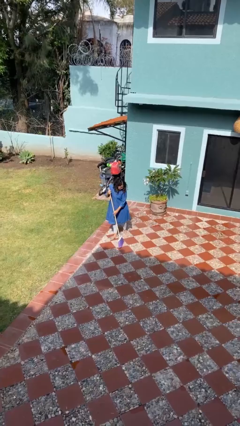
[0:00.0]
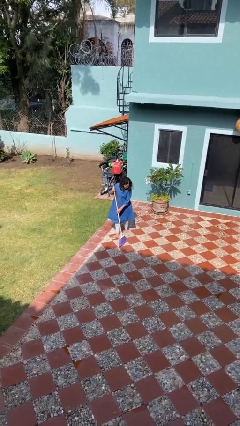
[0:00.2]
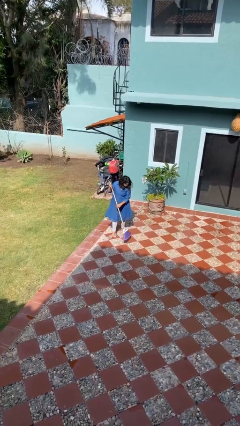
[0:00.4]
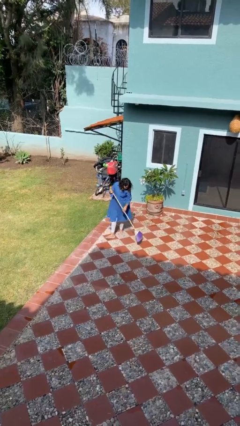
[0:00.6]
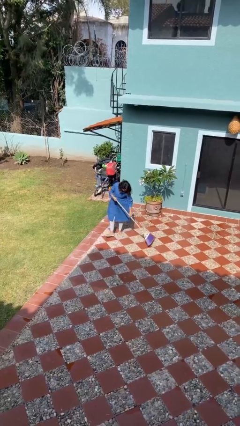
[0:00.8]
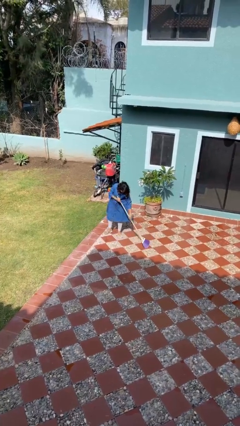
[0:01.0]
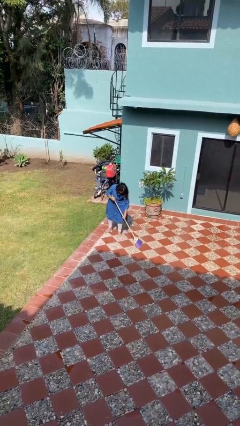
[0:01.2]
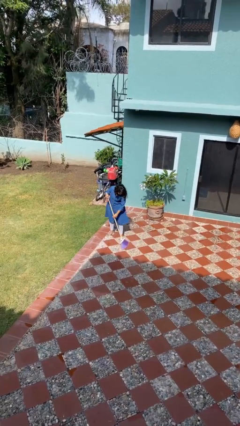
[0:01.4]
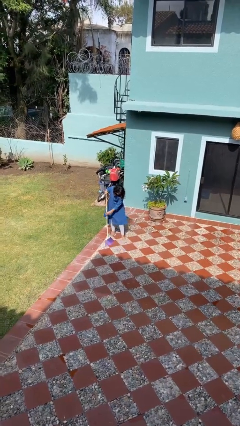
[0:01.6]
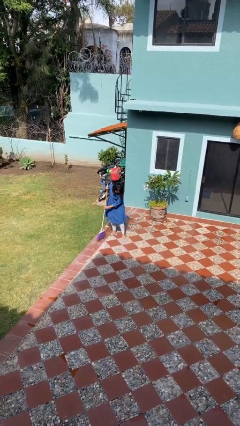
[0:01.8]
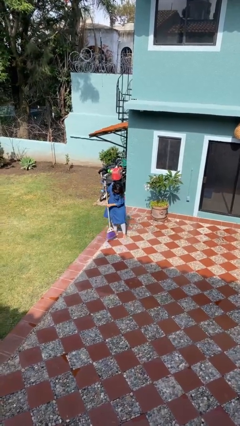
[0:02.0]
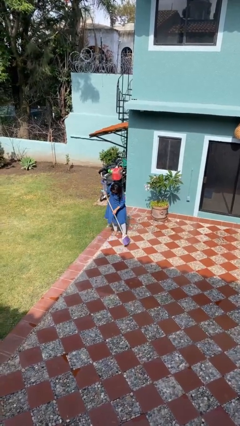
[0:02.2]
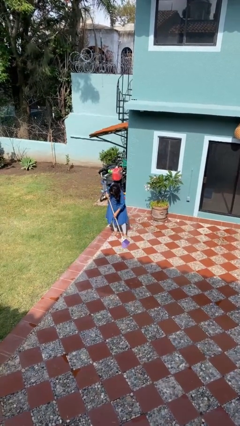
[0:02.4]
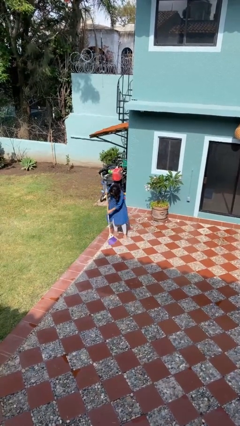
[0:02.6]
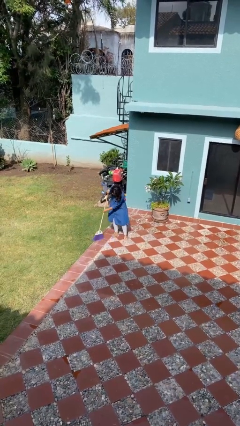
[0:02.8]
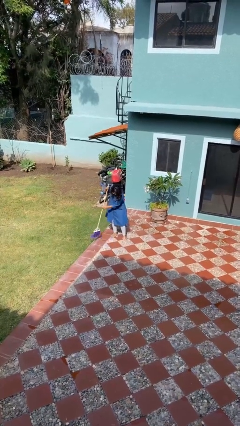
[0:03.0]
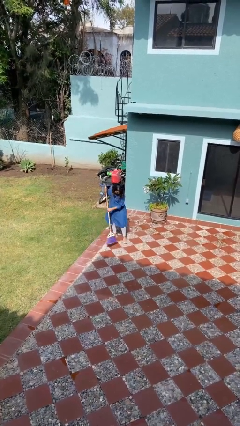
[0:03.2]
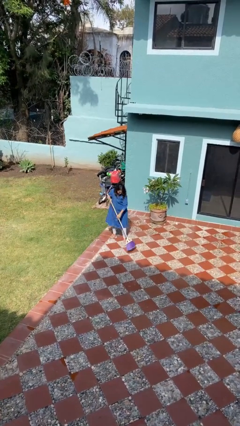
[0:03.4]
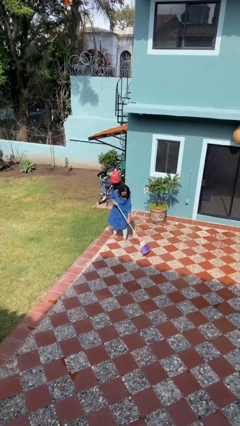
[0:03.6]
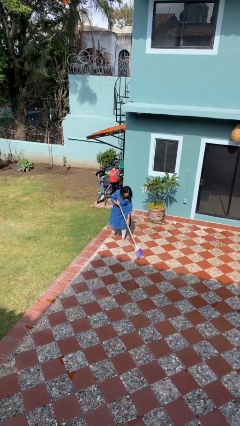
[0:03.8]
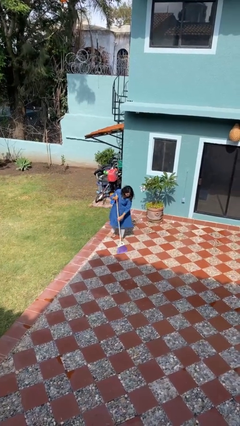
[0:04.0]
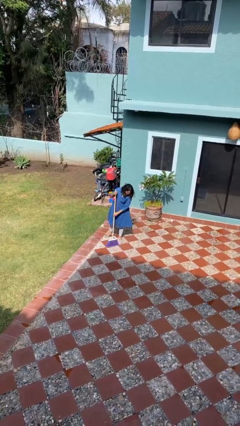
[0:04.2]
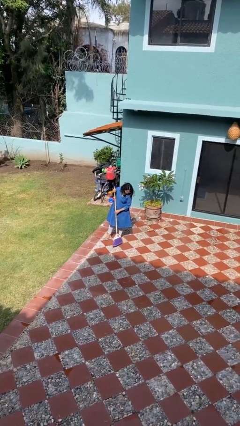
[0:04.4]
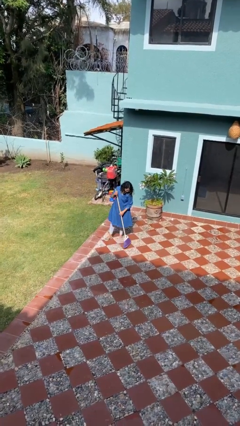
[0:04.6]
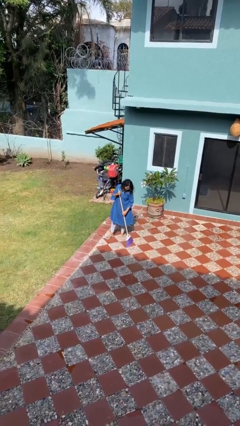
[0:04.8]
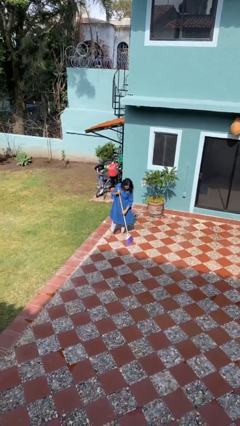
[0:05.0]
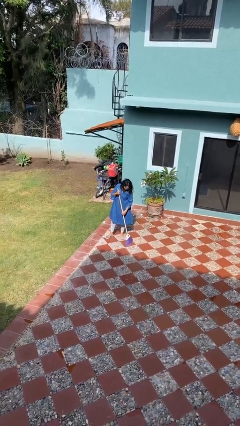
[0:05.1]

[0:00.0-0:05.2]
person sweeps floor

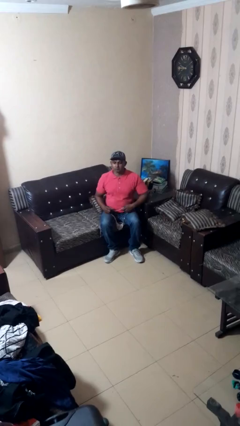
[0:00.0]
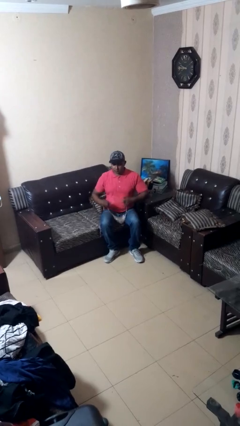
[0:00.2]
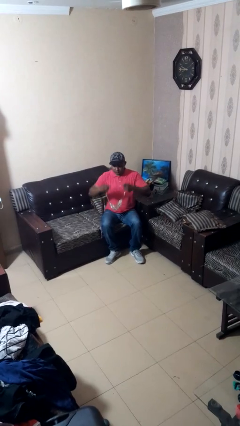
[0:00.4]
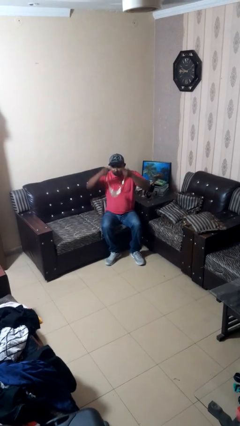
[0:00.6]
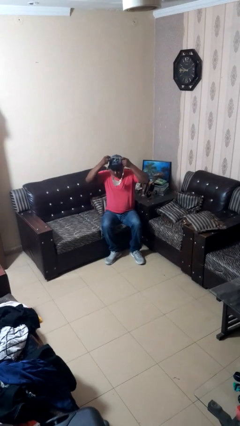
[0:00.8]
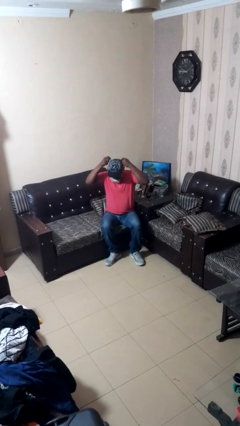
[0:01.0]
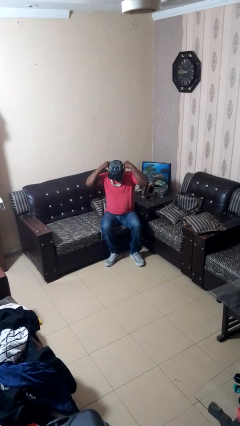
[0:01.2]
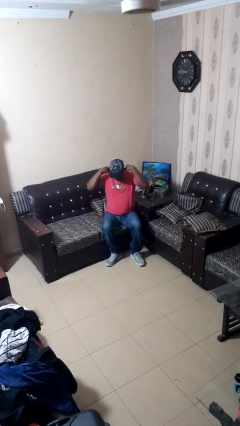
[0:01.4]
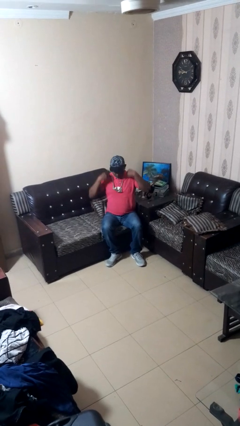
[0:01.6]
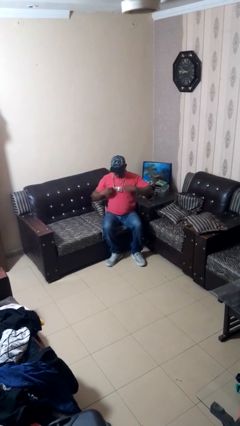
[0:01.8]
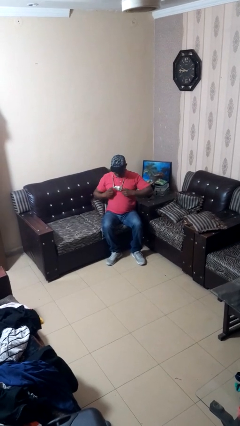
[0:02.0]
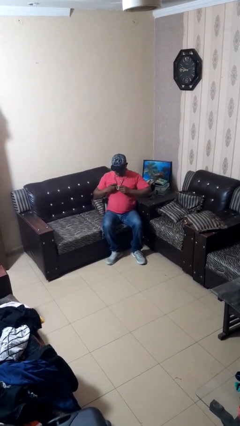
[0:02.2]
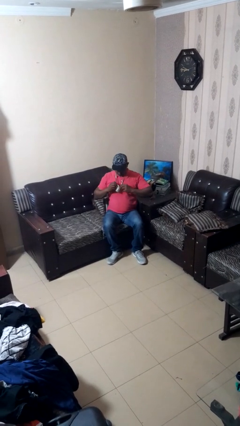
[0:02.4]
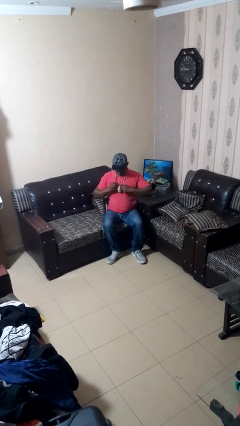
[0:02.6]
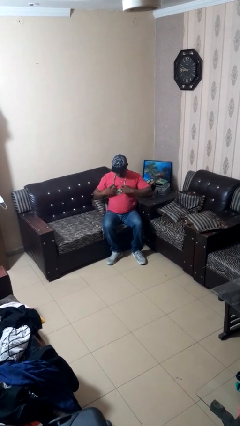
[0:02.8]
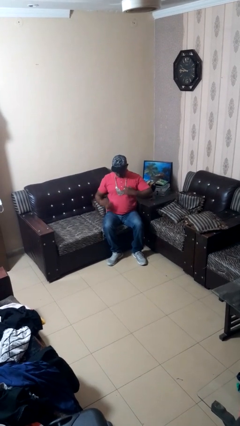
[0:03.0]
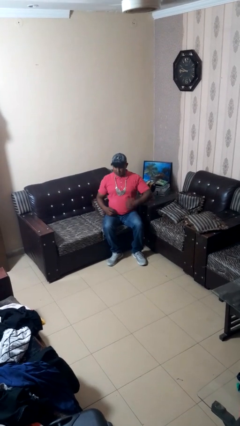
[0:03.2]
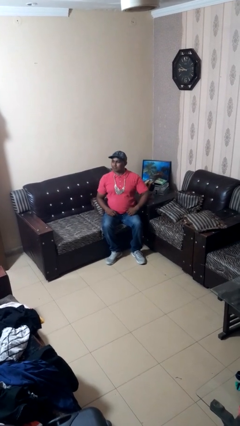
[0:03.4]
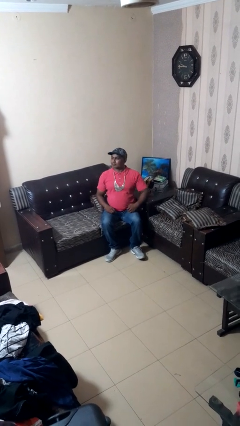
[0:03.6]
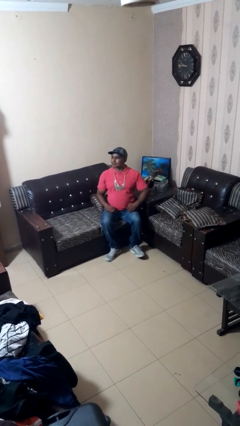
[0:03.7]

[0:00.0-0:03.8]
person puts on necklace

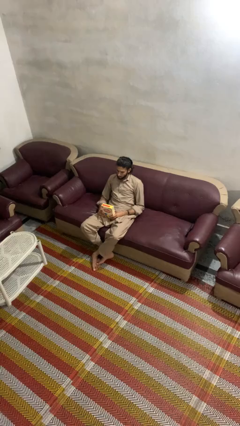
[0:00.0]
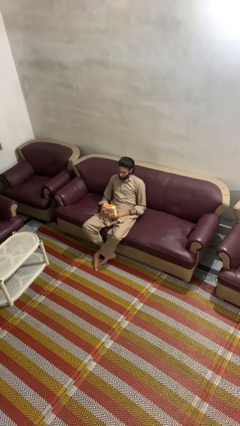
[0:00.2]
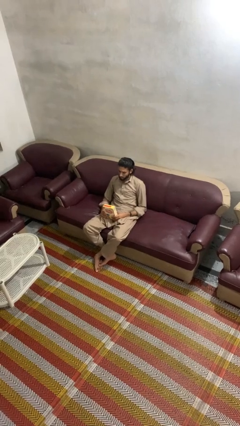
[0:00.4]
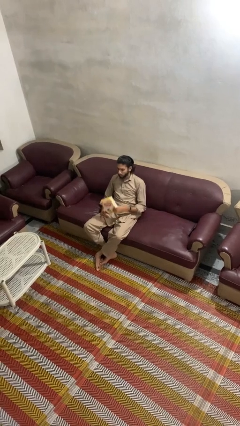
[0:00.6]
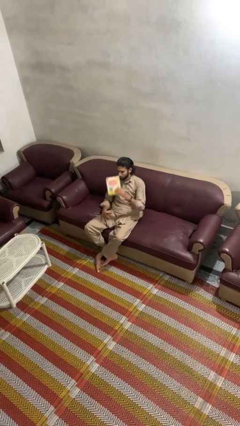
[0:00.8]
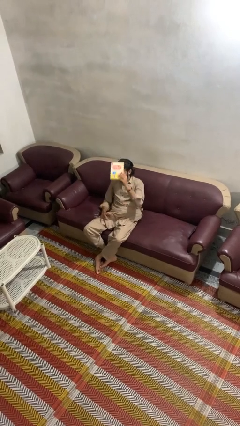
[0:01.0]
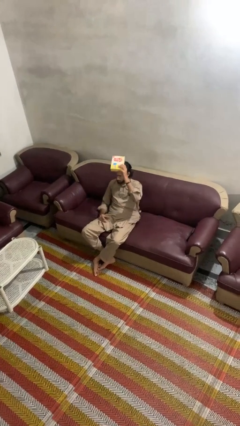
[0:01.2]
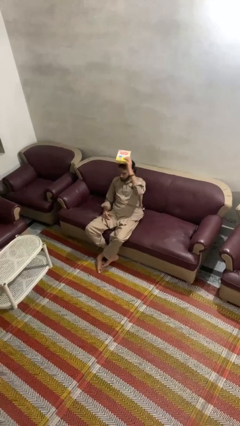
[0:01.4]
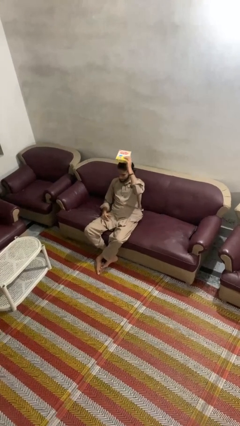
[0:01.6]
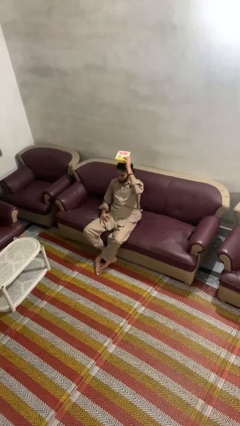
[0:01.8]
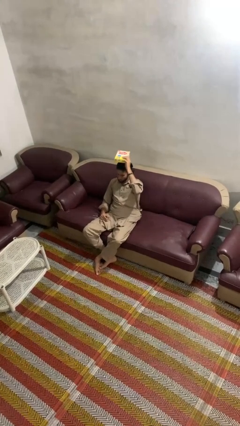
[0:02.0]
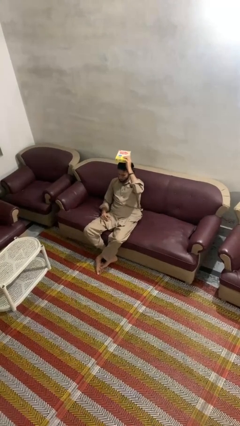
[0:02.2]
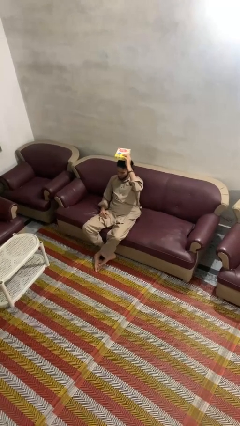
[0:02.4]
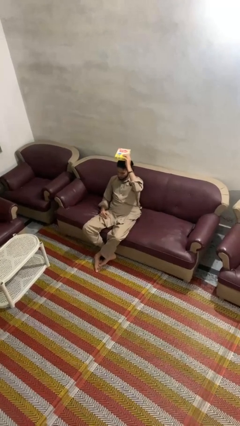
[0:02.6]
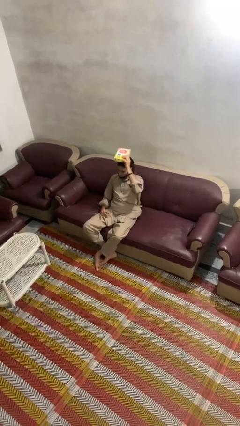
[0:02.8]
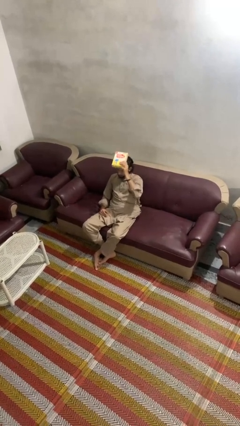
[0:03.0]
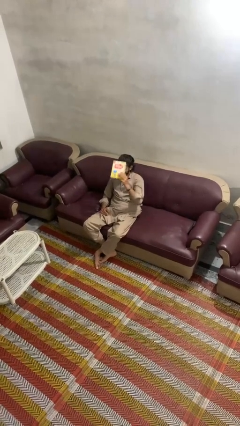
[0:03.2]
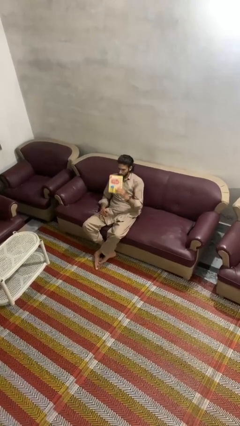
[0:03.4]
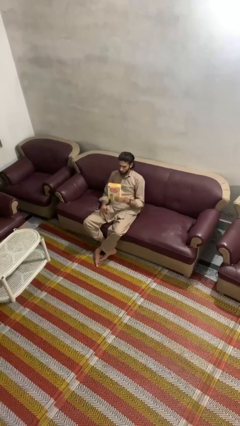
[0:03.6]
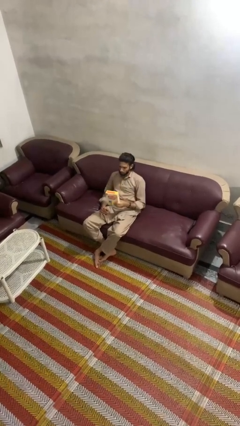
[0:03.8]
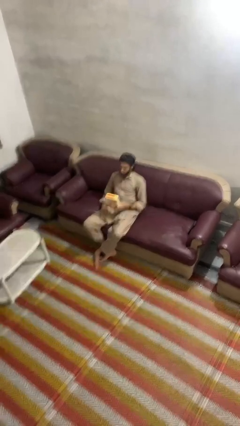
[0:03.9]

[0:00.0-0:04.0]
person holds object above head

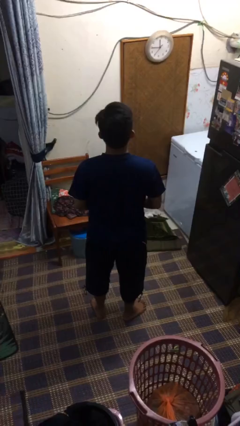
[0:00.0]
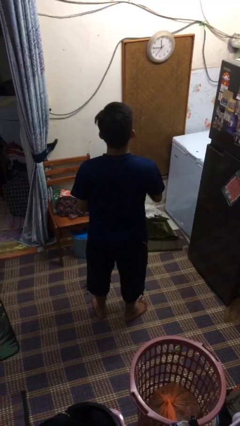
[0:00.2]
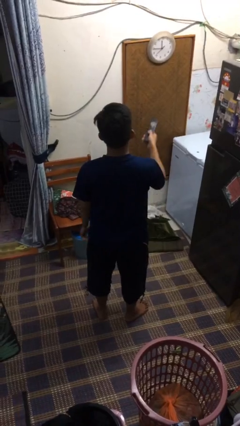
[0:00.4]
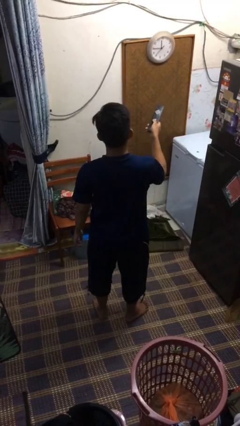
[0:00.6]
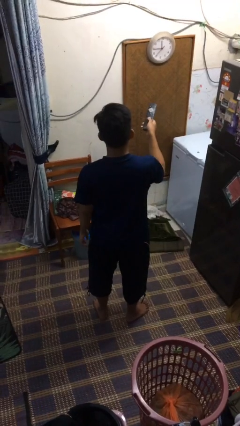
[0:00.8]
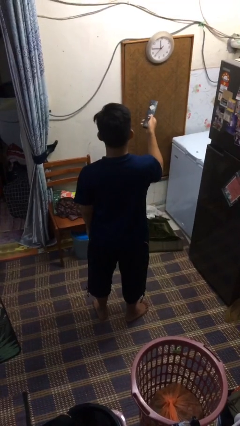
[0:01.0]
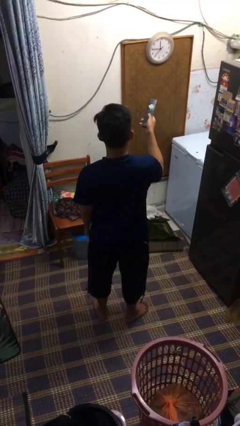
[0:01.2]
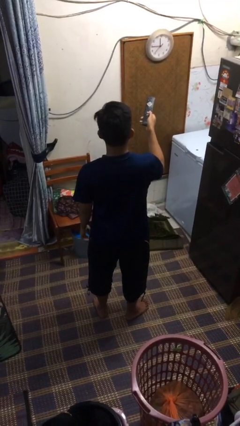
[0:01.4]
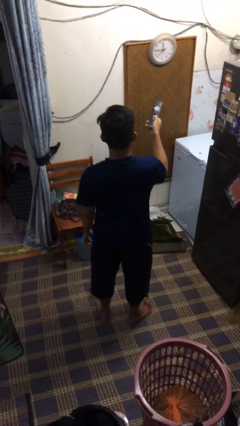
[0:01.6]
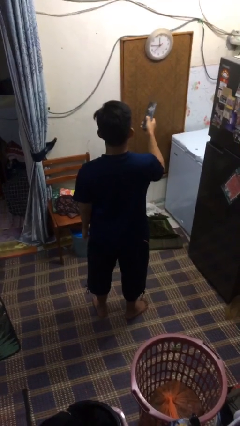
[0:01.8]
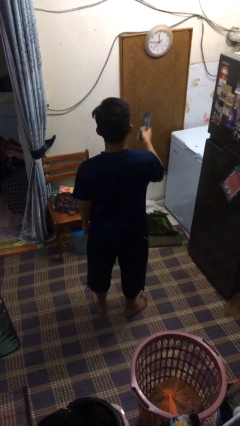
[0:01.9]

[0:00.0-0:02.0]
person uses television remote

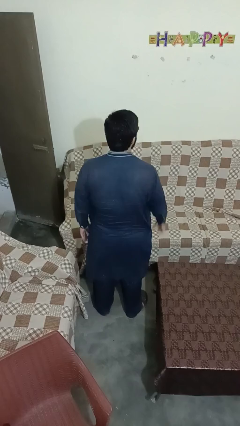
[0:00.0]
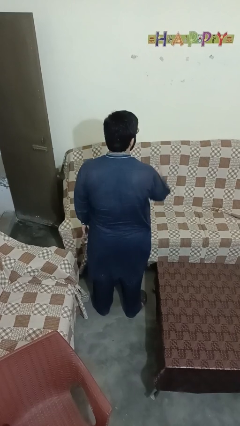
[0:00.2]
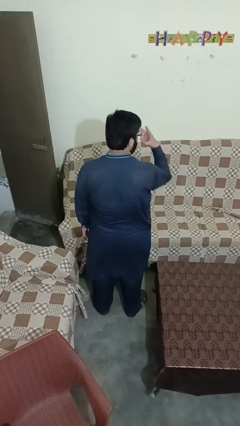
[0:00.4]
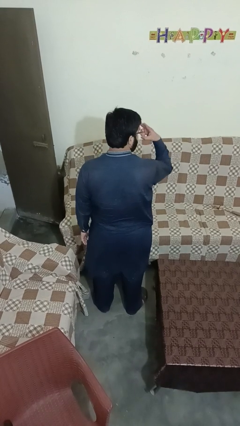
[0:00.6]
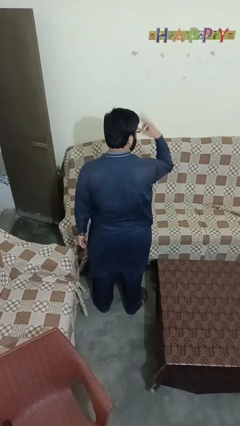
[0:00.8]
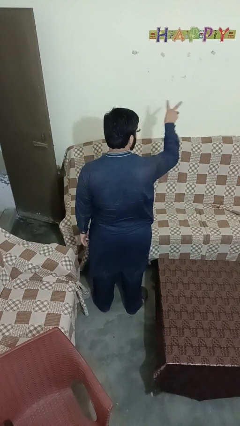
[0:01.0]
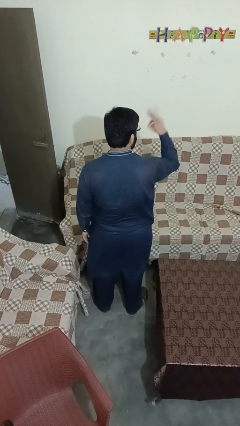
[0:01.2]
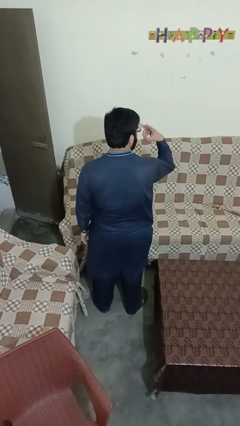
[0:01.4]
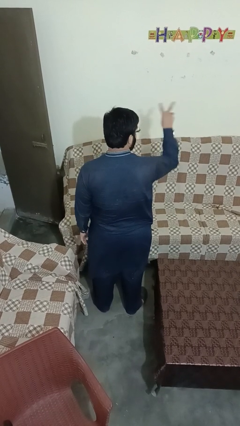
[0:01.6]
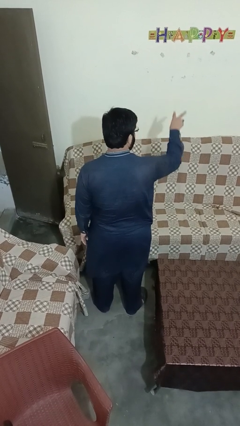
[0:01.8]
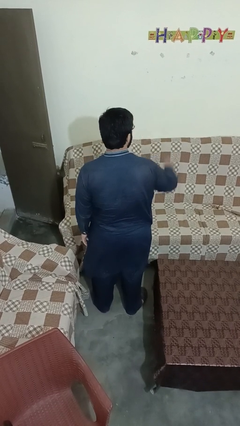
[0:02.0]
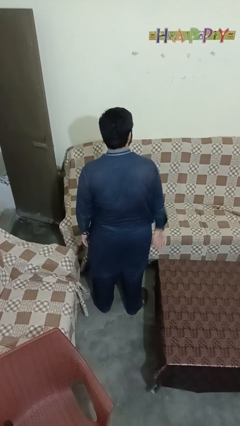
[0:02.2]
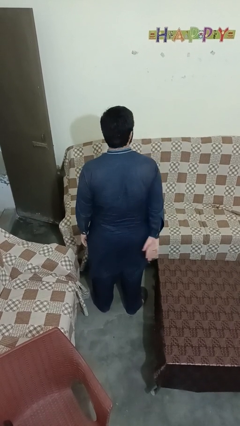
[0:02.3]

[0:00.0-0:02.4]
person gestures watch closely

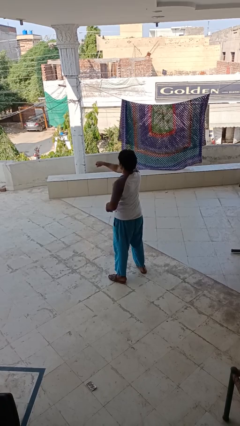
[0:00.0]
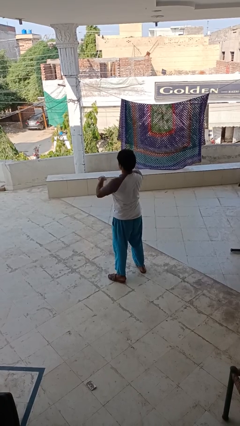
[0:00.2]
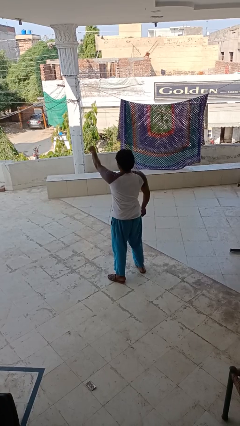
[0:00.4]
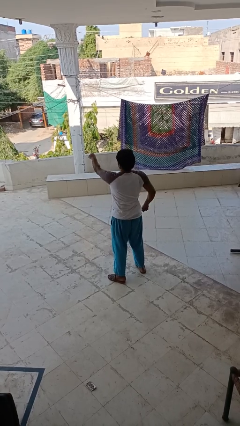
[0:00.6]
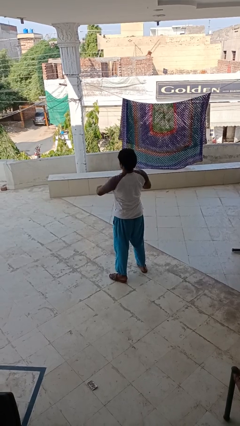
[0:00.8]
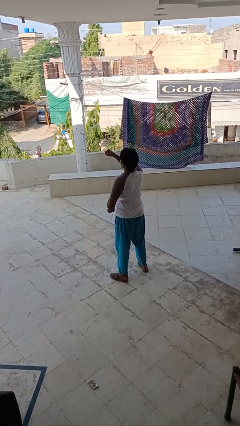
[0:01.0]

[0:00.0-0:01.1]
person punches
